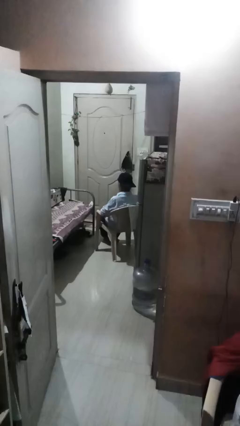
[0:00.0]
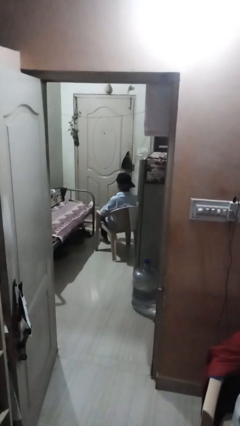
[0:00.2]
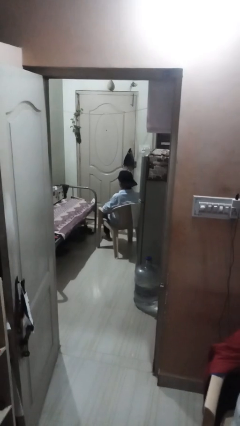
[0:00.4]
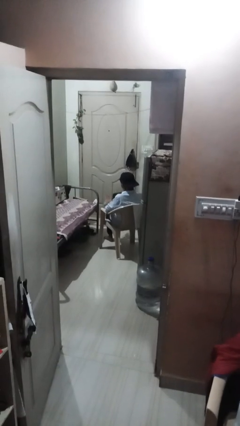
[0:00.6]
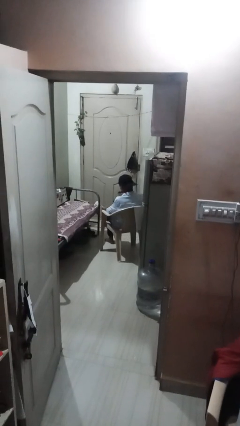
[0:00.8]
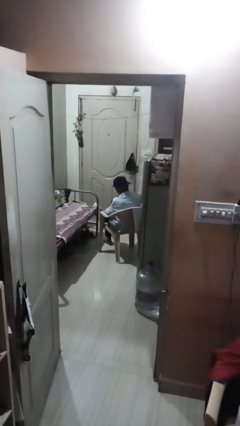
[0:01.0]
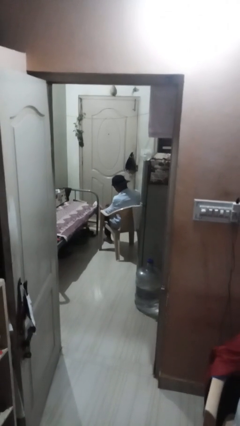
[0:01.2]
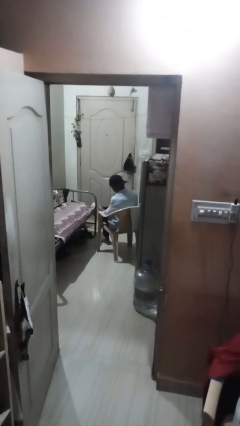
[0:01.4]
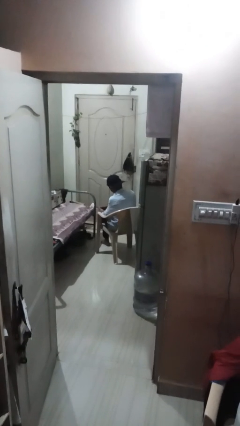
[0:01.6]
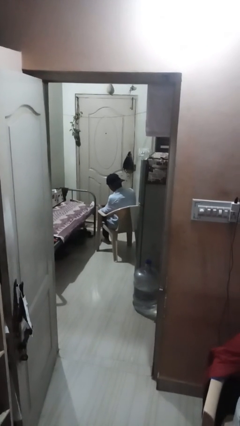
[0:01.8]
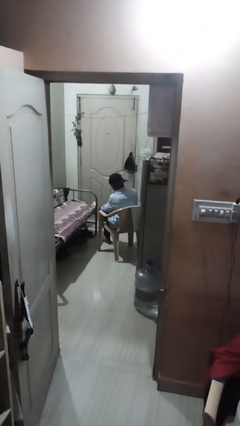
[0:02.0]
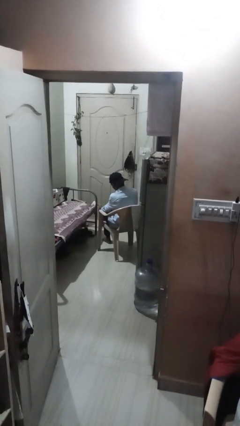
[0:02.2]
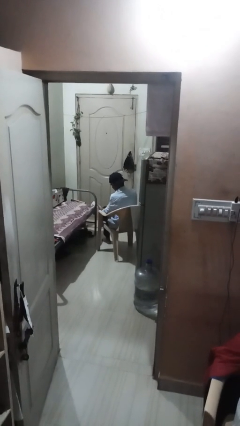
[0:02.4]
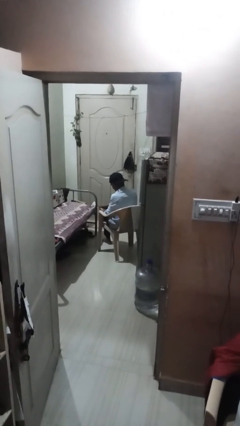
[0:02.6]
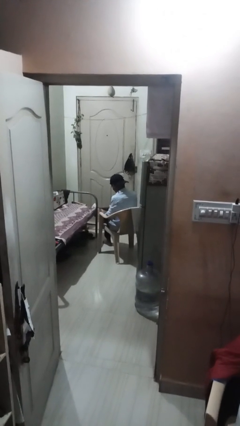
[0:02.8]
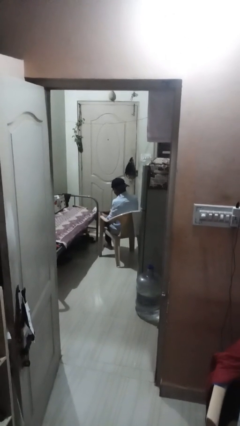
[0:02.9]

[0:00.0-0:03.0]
person rubs foot

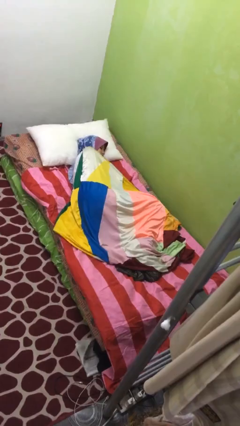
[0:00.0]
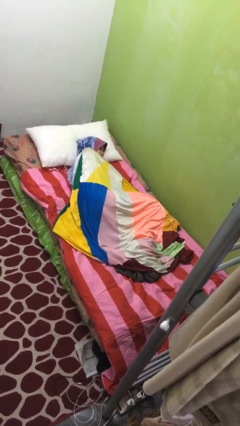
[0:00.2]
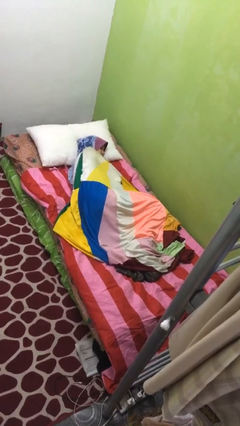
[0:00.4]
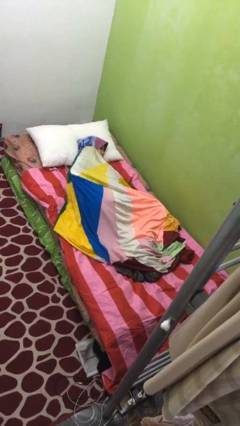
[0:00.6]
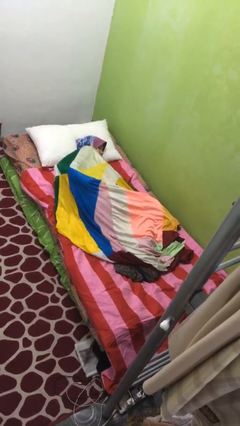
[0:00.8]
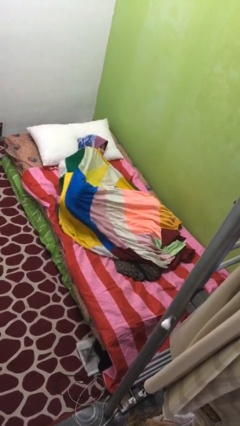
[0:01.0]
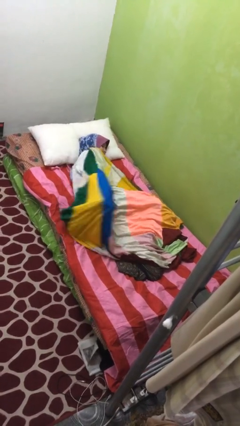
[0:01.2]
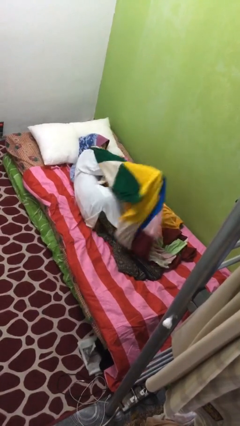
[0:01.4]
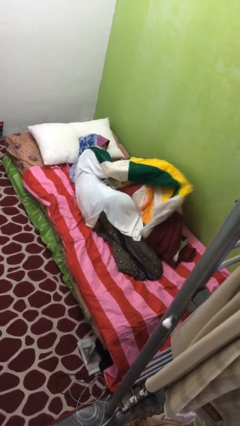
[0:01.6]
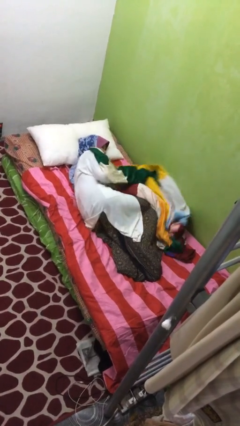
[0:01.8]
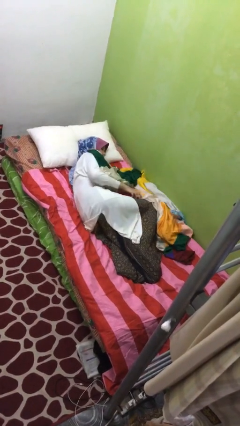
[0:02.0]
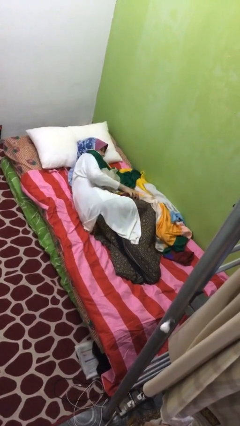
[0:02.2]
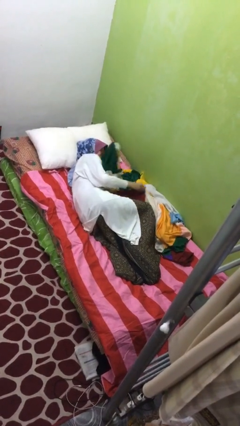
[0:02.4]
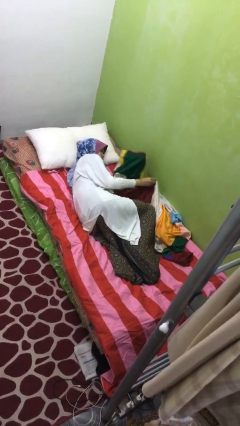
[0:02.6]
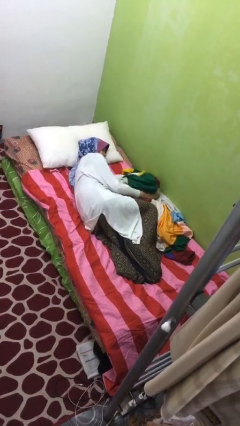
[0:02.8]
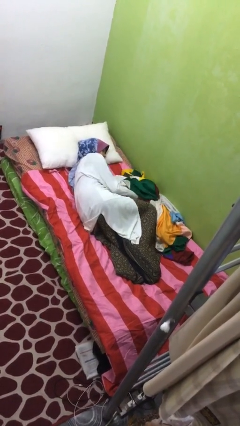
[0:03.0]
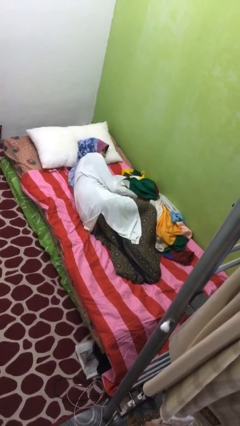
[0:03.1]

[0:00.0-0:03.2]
person uncovers with blanket

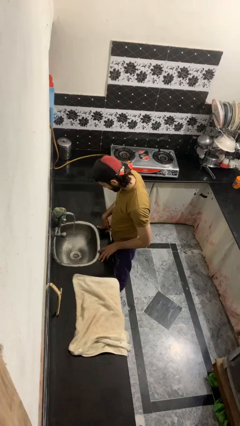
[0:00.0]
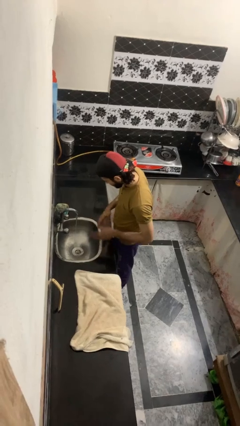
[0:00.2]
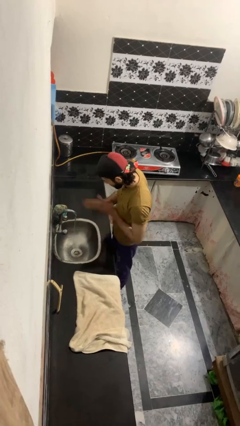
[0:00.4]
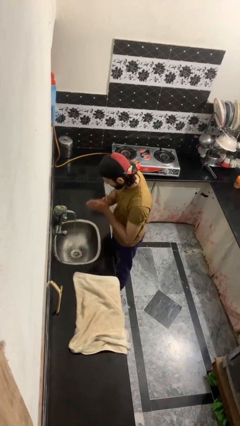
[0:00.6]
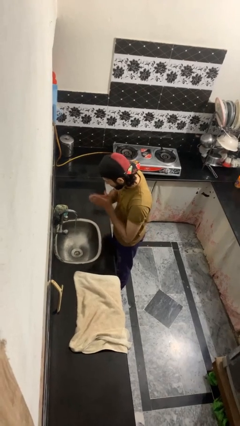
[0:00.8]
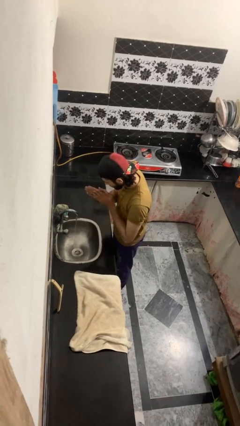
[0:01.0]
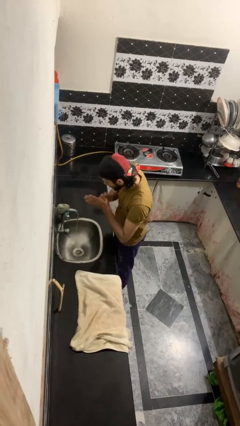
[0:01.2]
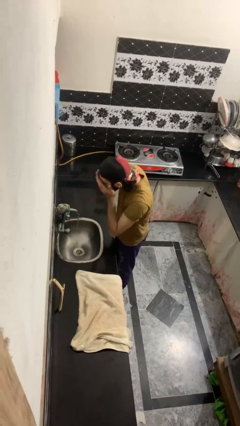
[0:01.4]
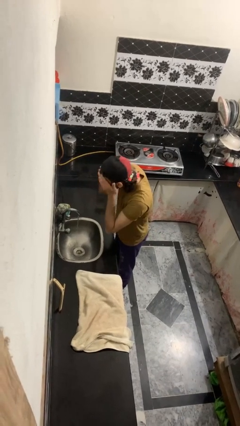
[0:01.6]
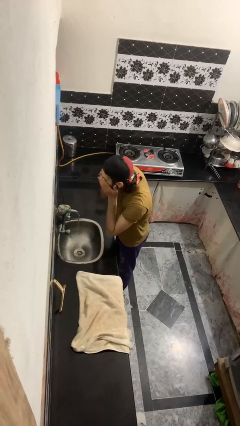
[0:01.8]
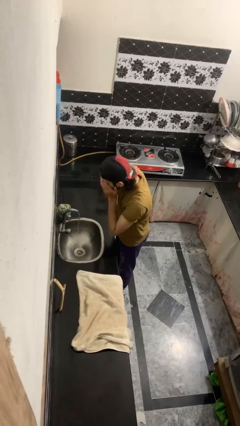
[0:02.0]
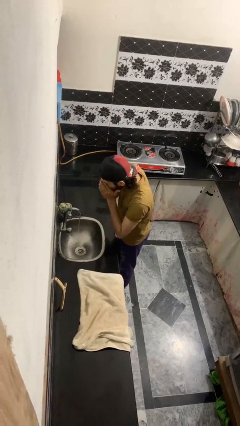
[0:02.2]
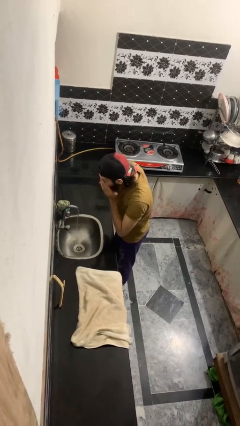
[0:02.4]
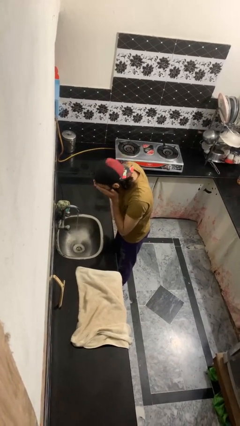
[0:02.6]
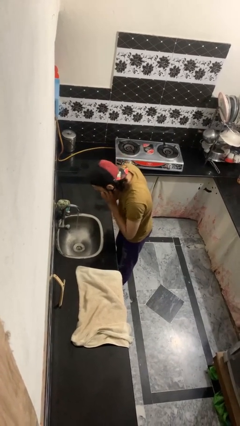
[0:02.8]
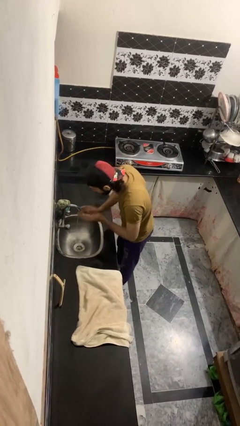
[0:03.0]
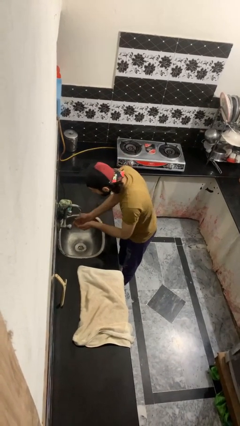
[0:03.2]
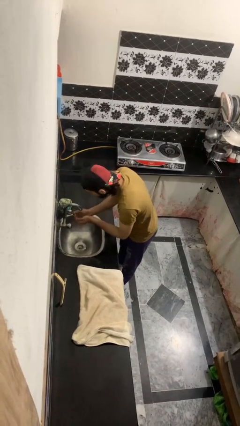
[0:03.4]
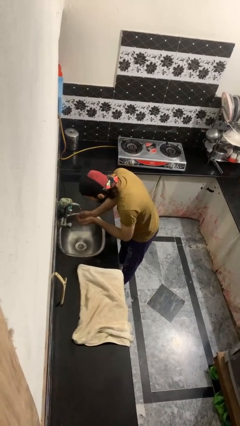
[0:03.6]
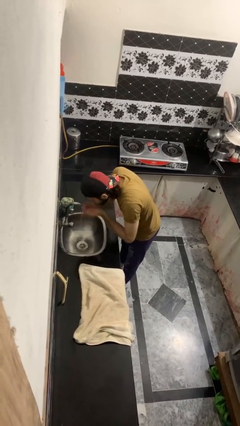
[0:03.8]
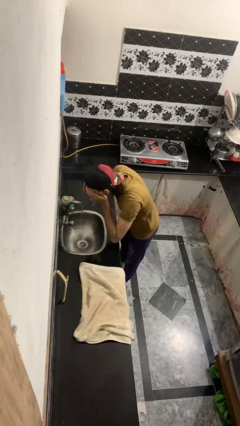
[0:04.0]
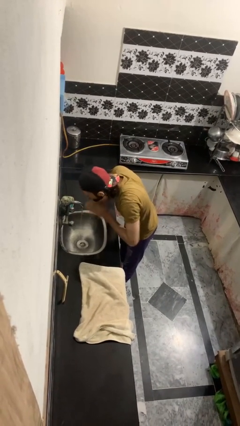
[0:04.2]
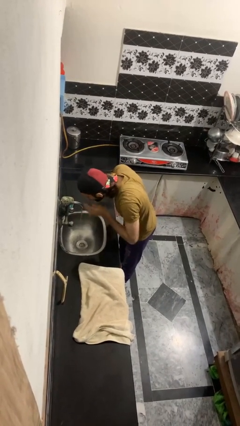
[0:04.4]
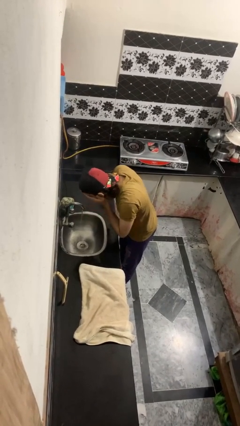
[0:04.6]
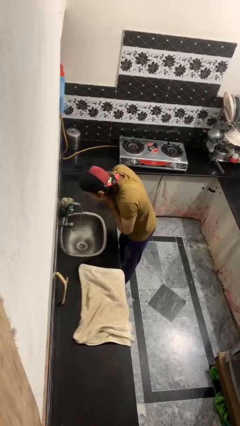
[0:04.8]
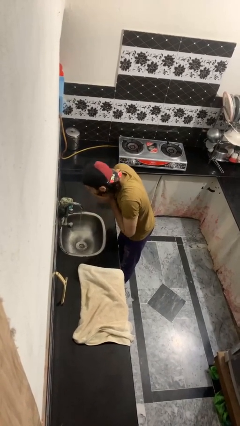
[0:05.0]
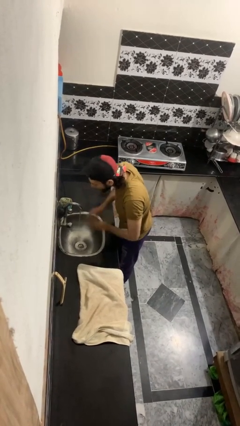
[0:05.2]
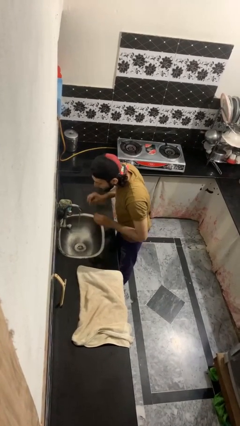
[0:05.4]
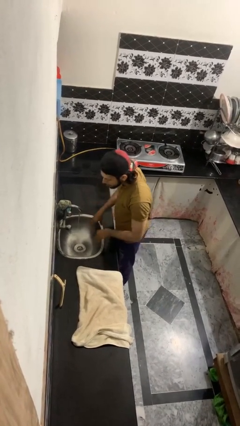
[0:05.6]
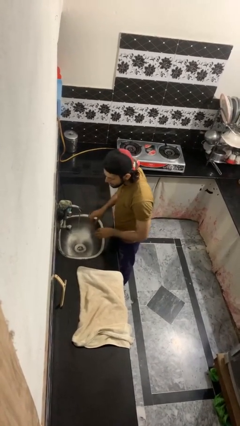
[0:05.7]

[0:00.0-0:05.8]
person washes face

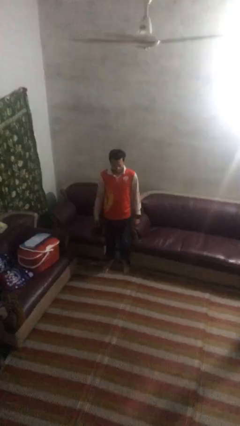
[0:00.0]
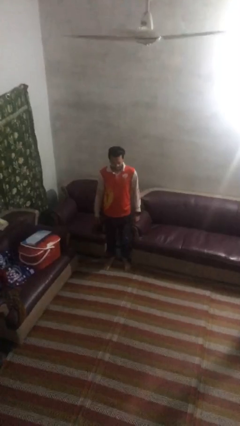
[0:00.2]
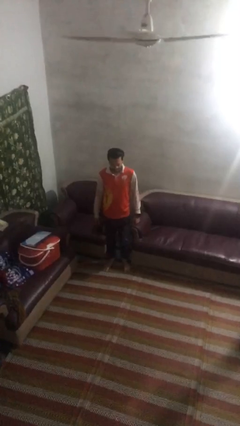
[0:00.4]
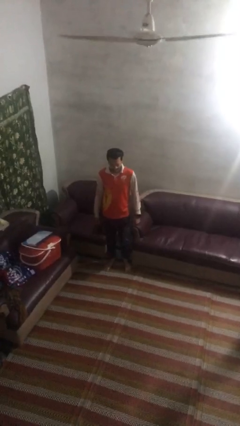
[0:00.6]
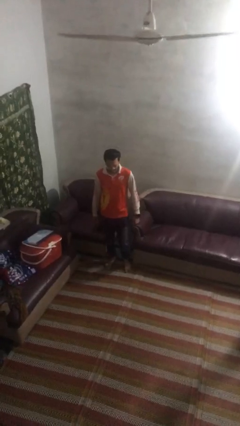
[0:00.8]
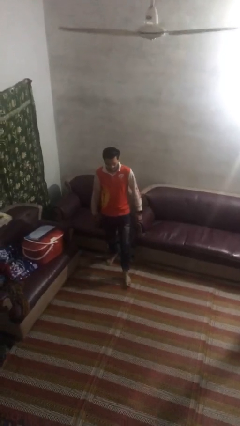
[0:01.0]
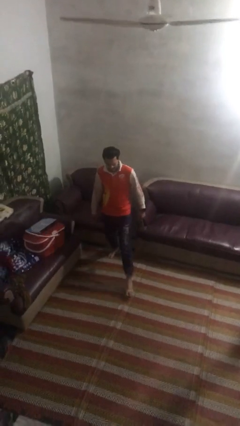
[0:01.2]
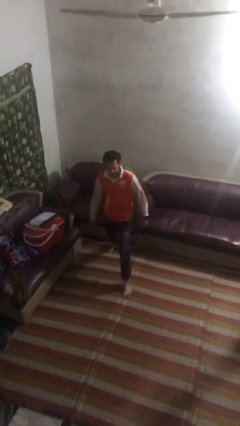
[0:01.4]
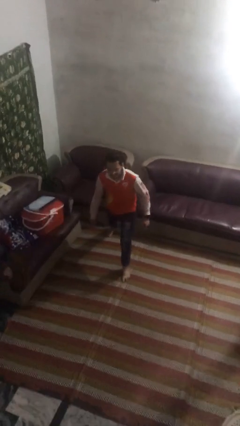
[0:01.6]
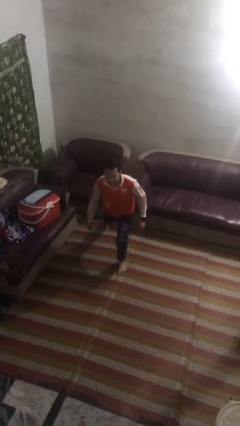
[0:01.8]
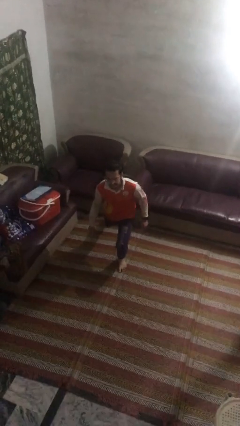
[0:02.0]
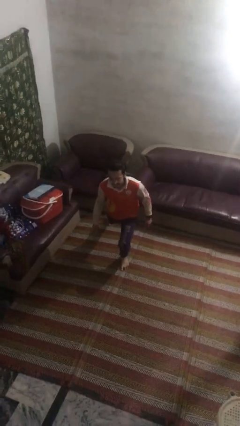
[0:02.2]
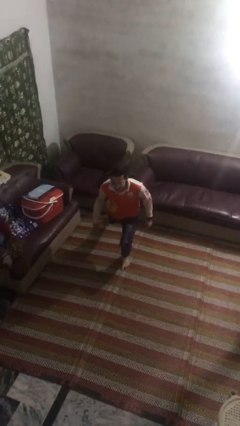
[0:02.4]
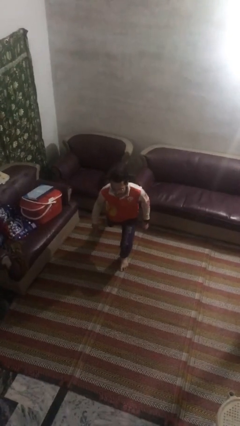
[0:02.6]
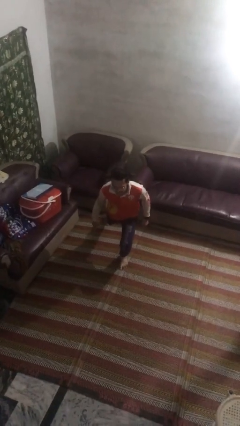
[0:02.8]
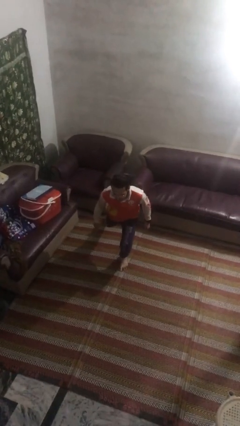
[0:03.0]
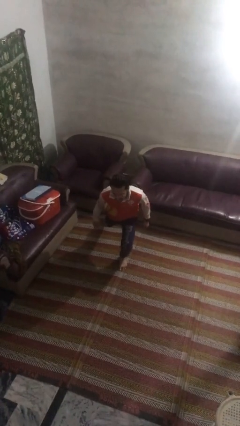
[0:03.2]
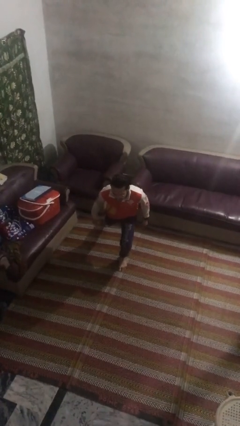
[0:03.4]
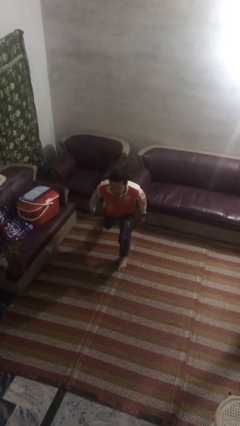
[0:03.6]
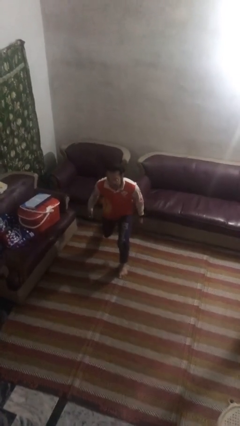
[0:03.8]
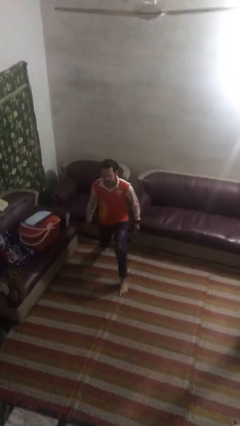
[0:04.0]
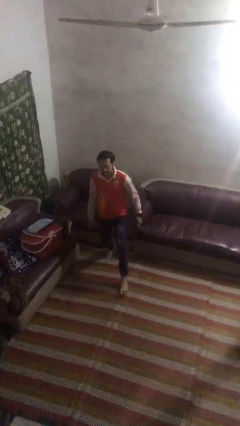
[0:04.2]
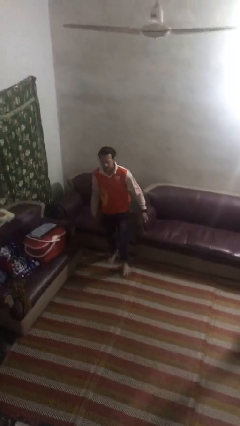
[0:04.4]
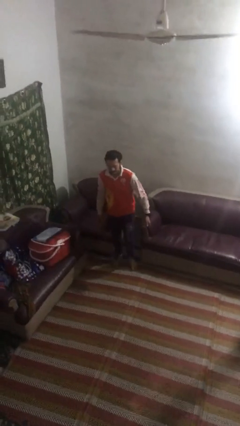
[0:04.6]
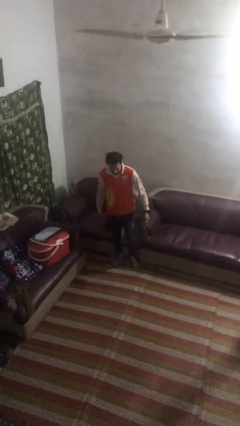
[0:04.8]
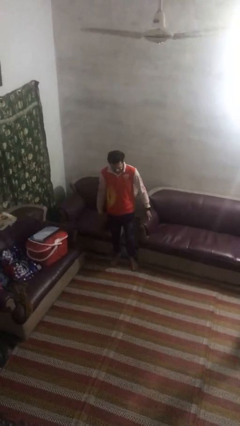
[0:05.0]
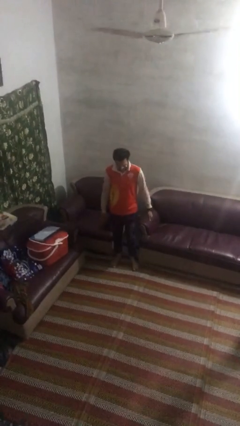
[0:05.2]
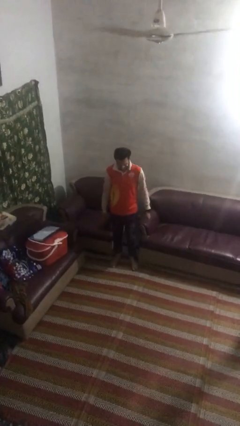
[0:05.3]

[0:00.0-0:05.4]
person exercises with lunges

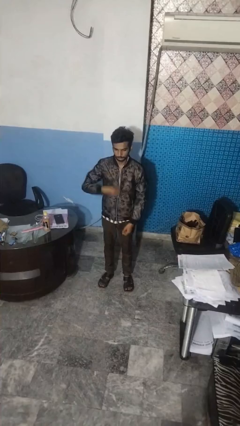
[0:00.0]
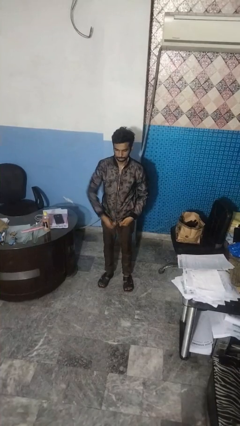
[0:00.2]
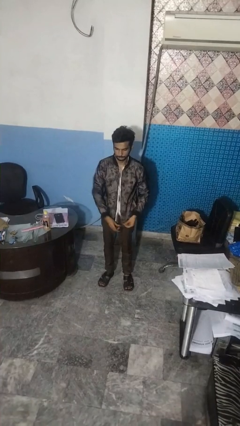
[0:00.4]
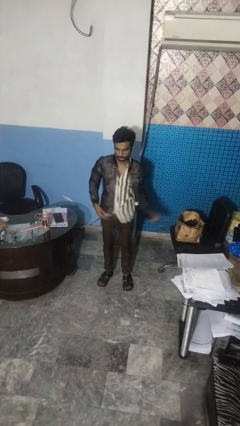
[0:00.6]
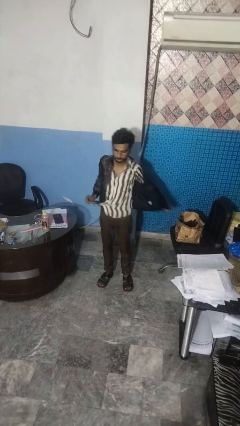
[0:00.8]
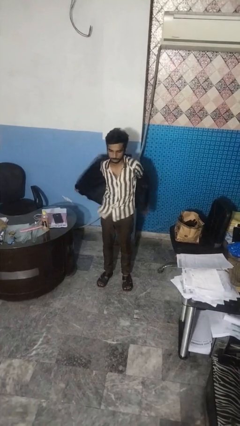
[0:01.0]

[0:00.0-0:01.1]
person unzips jacket
